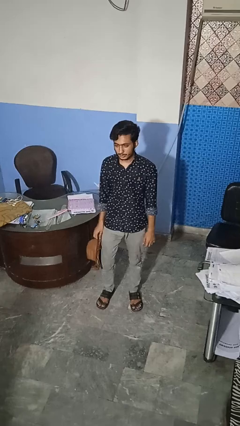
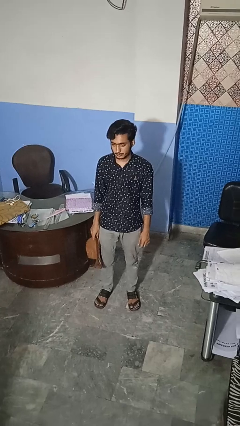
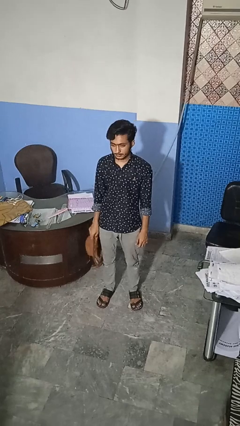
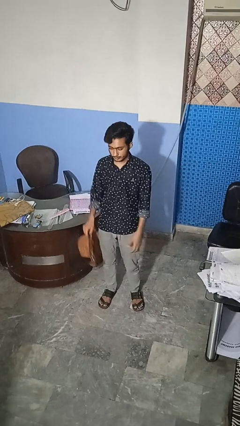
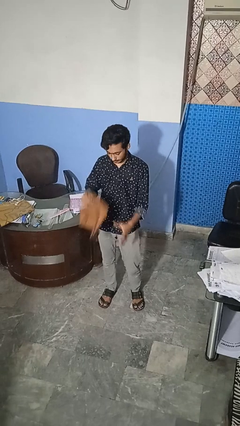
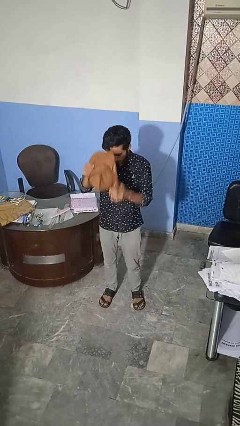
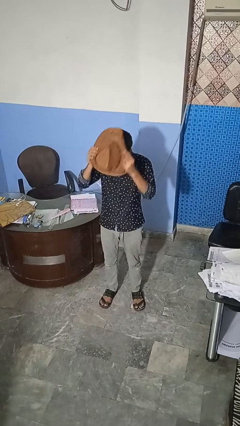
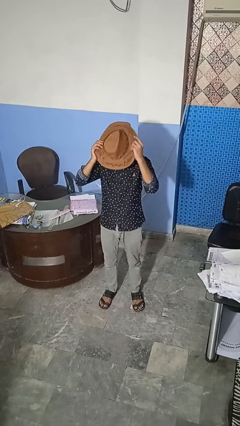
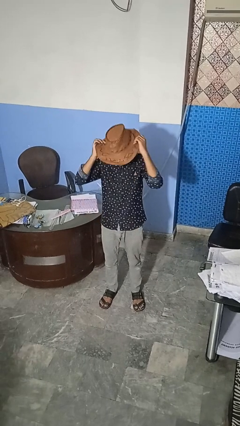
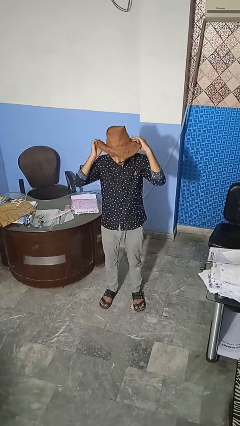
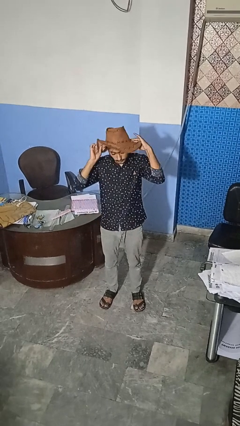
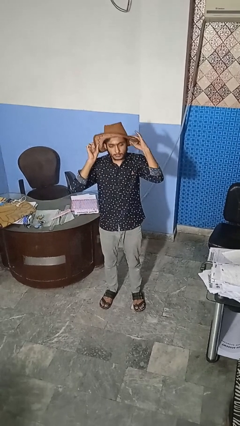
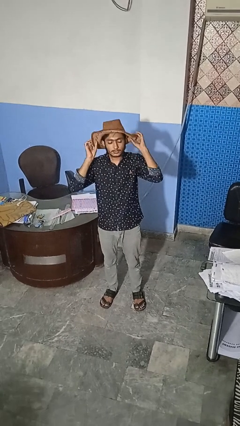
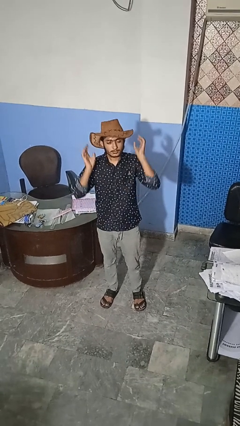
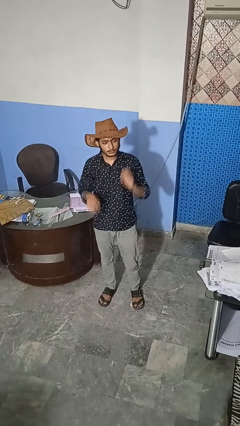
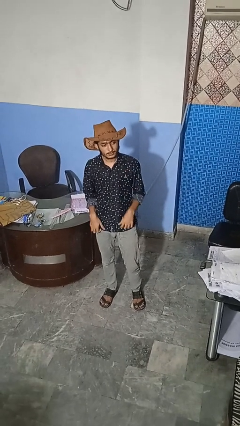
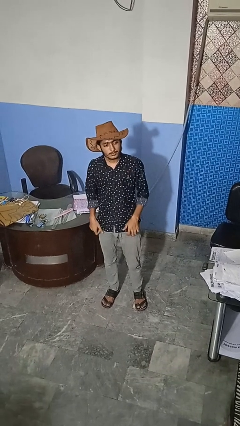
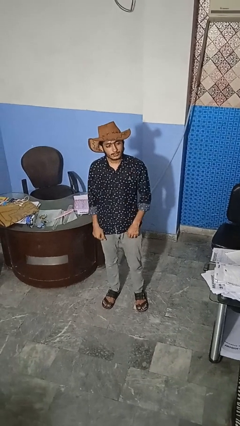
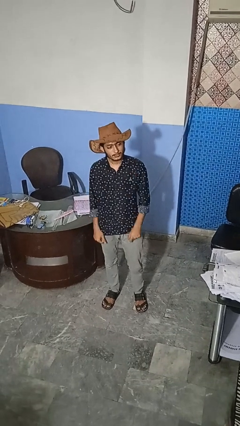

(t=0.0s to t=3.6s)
person puts on hat

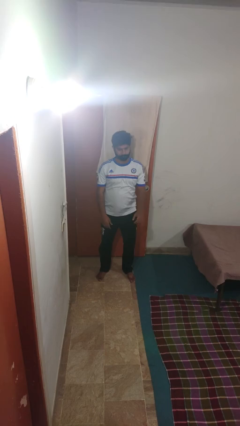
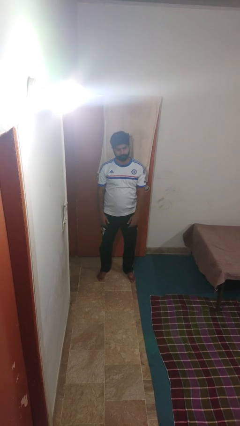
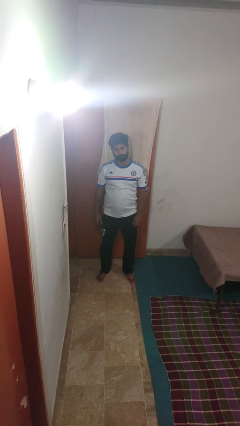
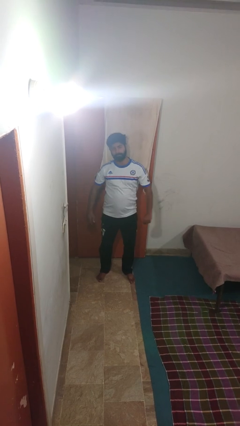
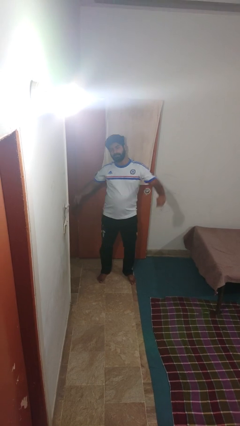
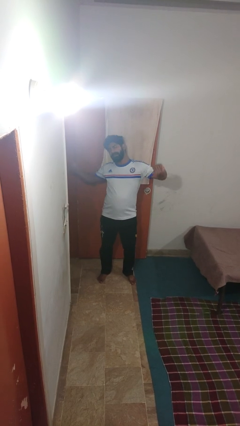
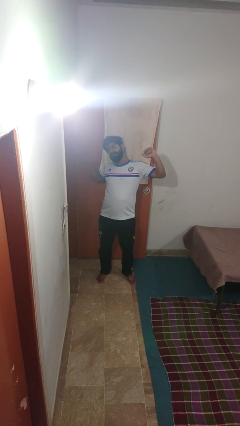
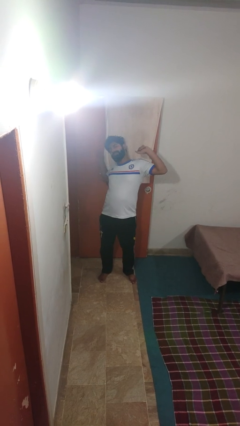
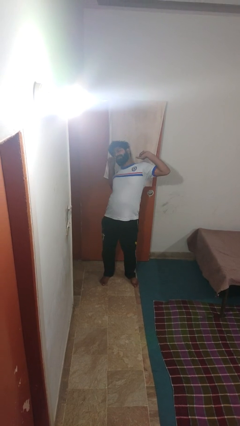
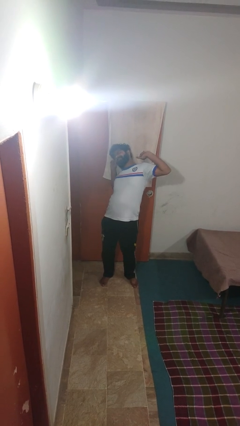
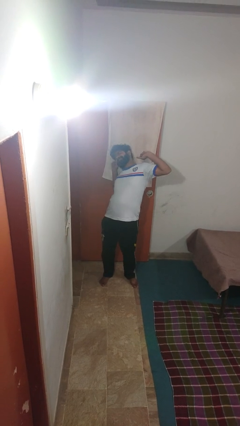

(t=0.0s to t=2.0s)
person stretches arms to side

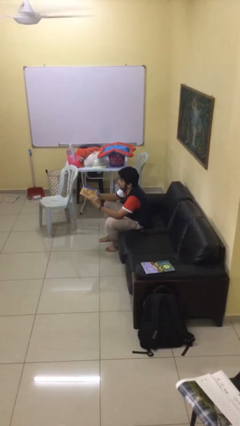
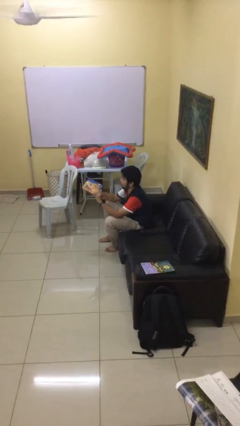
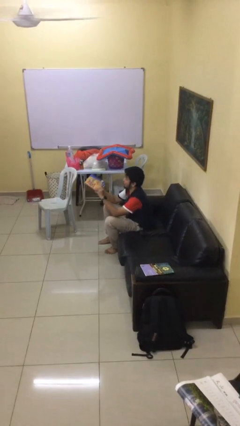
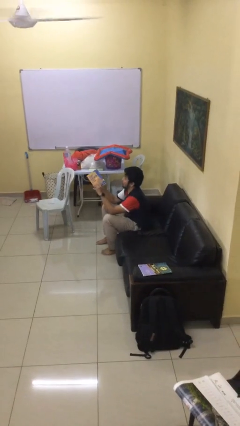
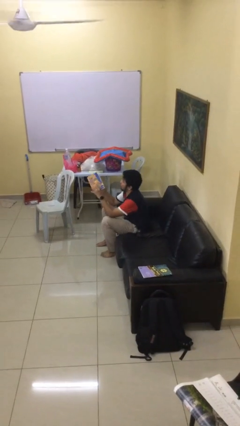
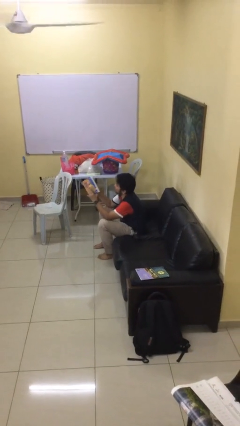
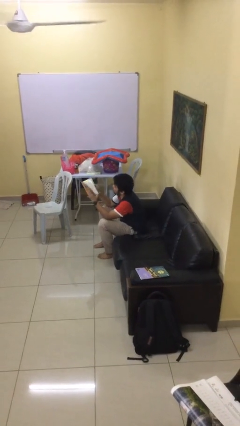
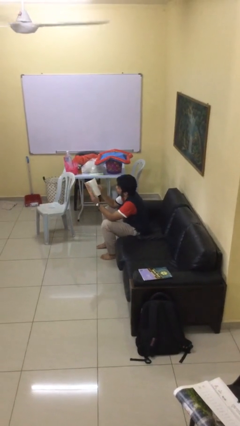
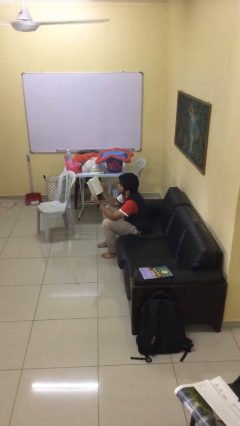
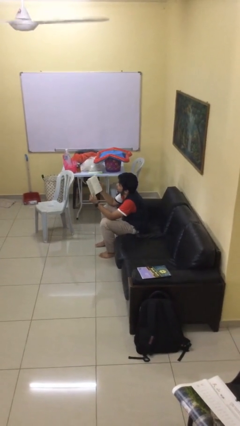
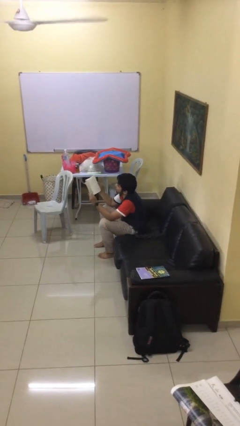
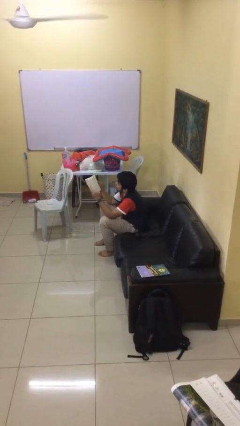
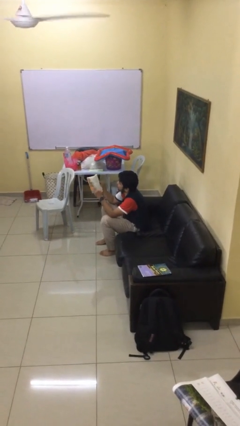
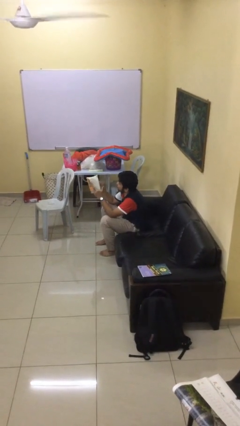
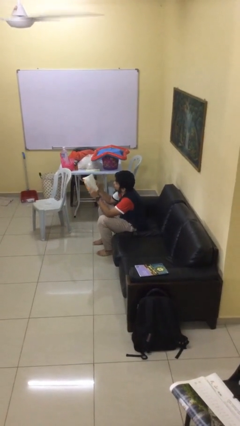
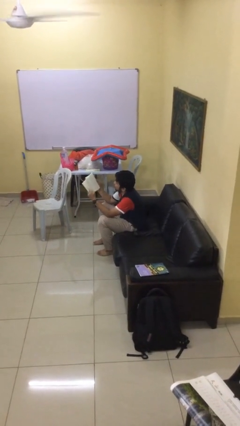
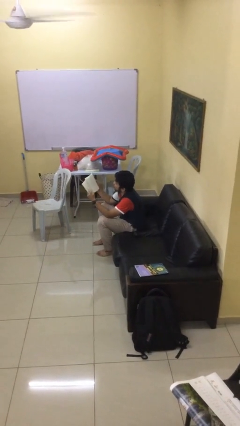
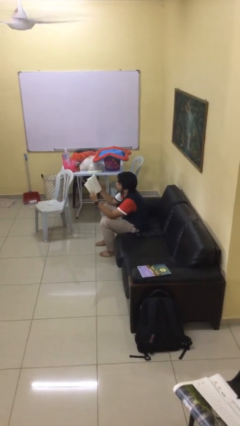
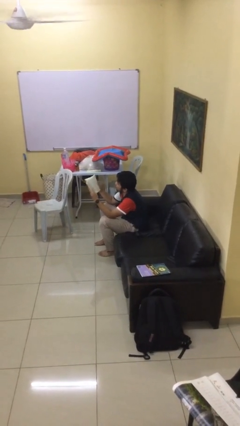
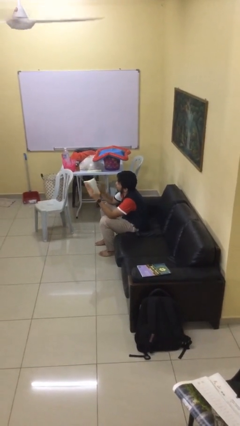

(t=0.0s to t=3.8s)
person reads book

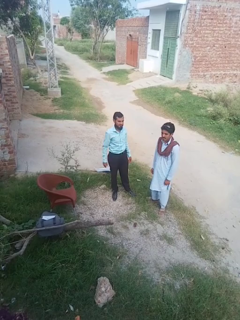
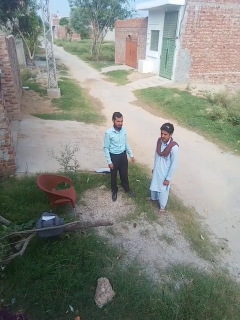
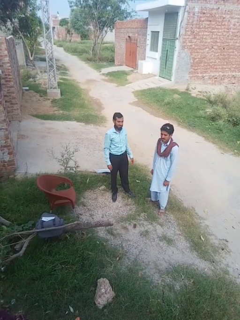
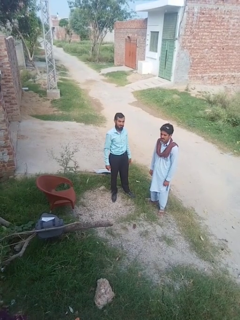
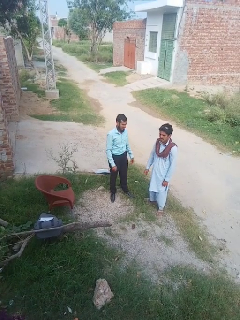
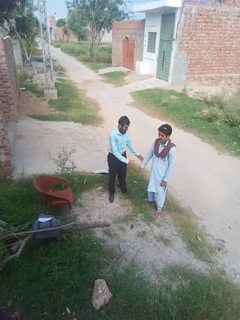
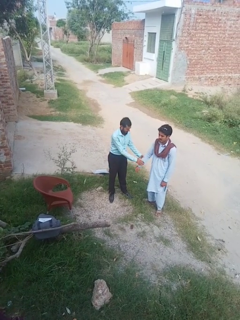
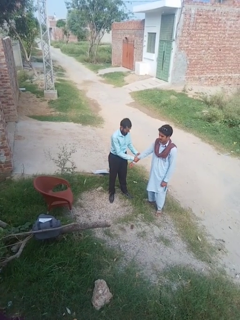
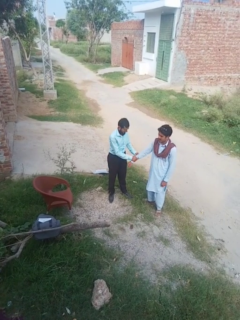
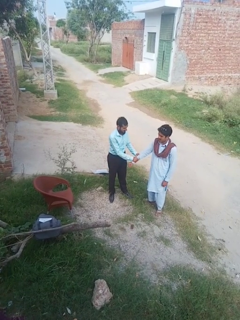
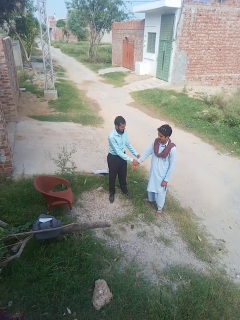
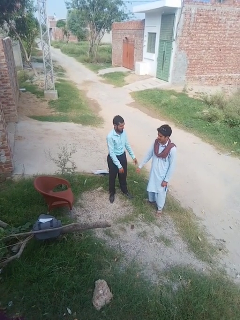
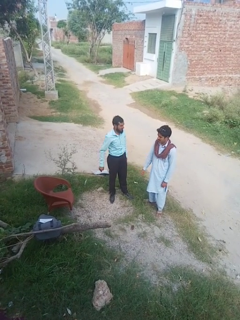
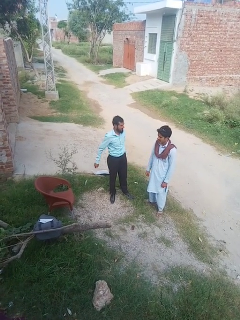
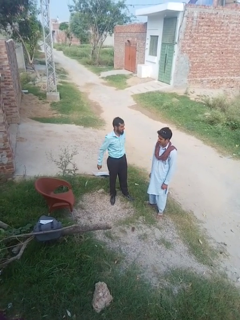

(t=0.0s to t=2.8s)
person grabs person by forearm

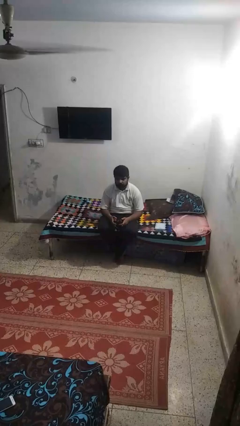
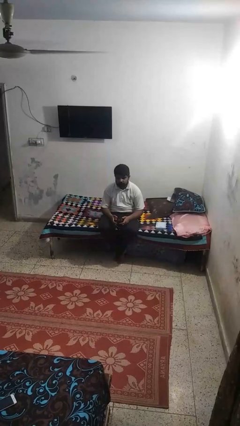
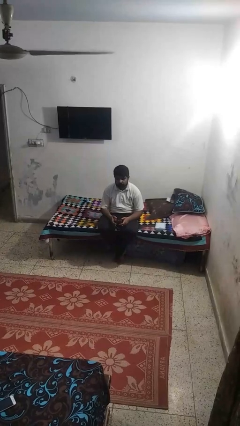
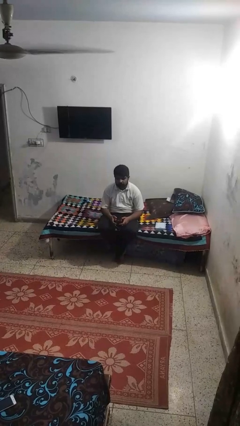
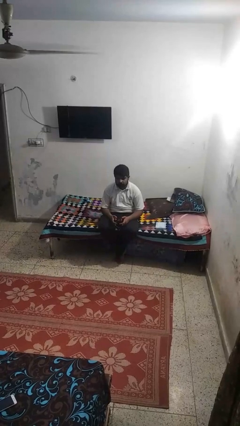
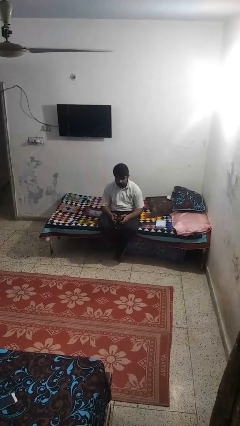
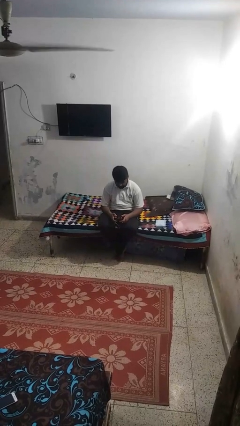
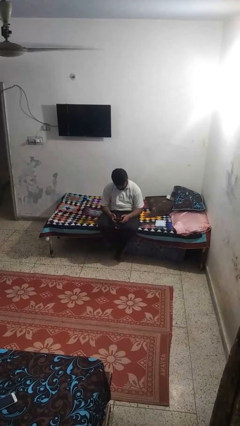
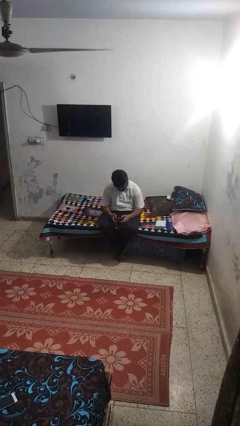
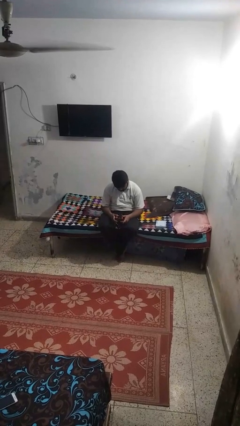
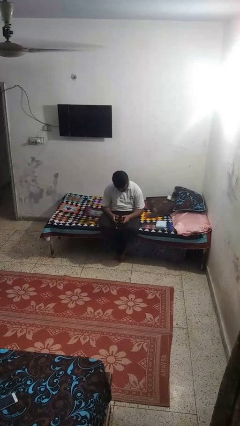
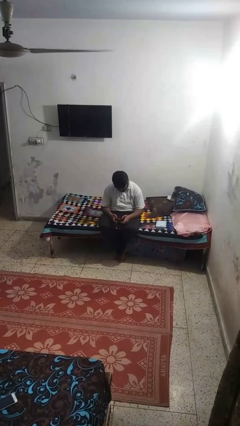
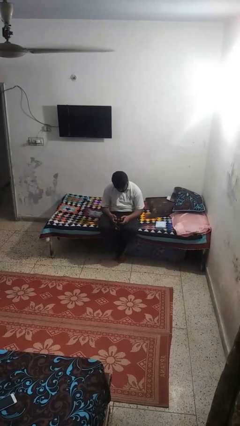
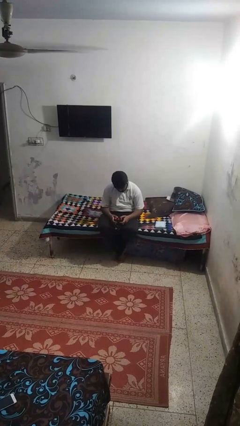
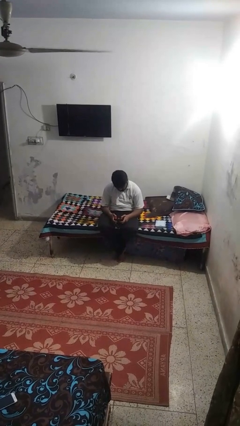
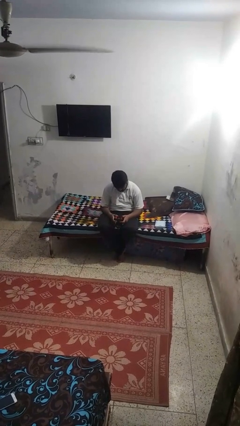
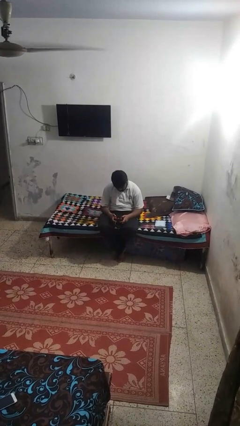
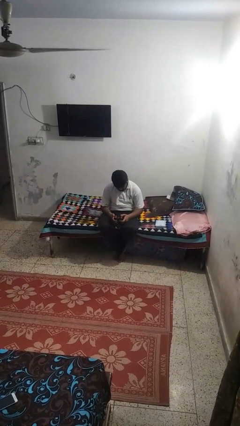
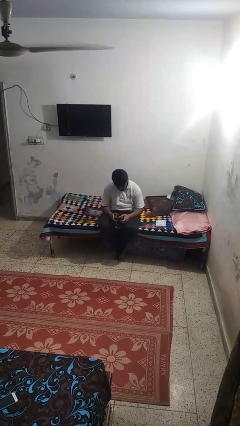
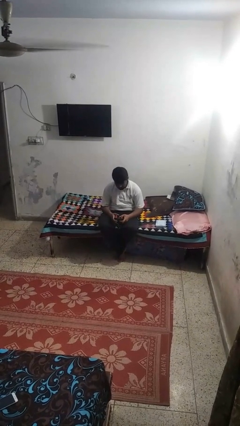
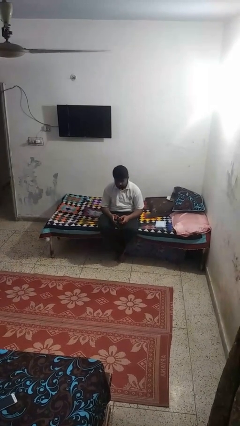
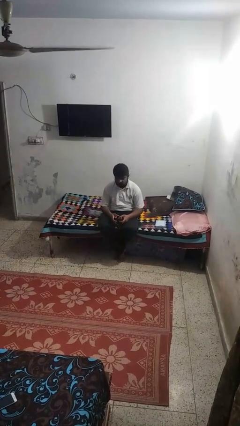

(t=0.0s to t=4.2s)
person interacts with handheld game

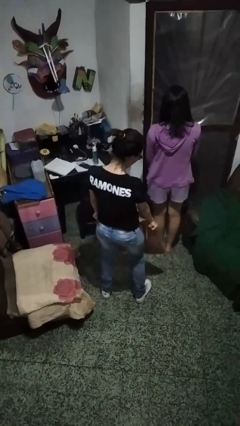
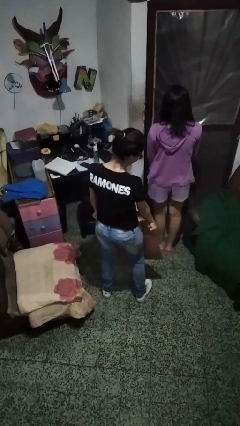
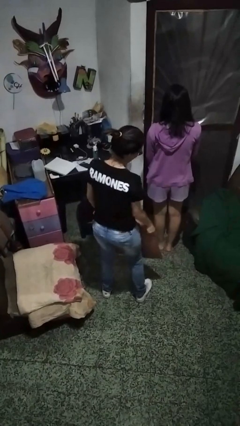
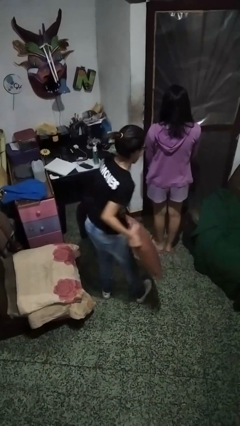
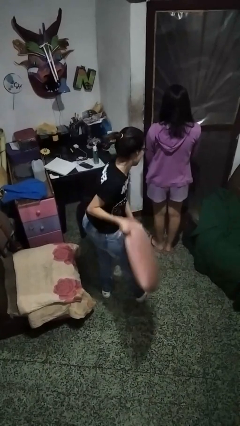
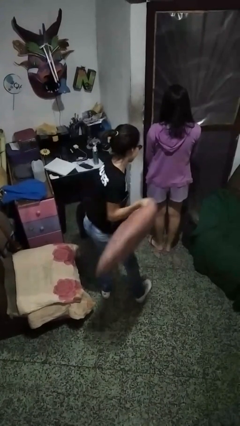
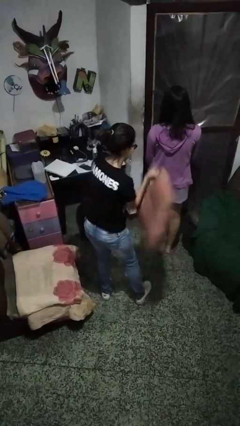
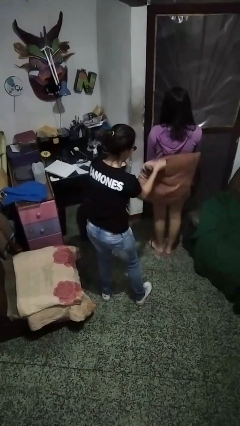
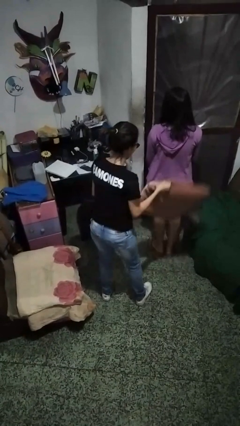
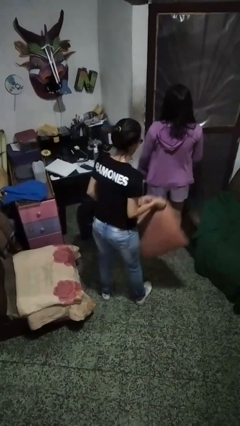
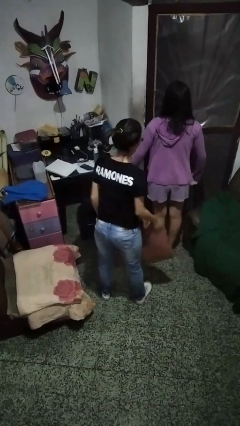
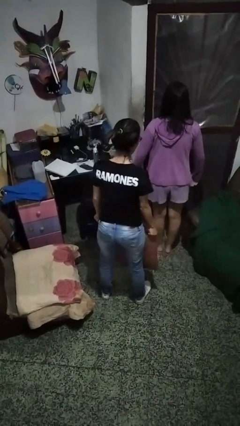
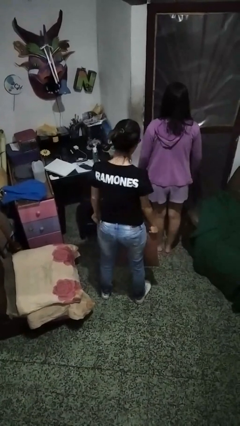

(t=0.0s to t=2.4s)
person hits person with pillow
